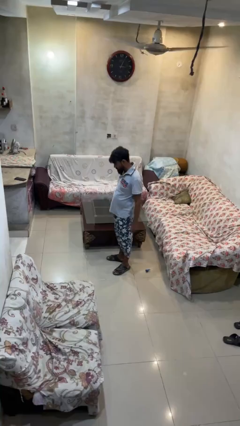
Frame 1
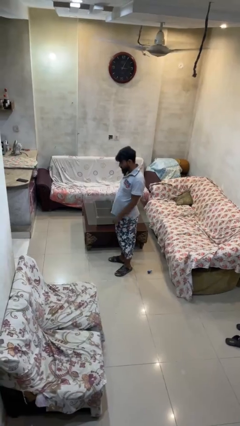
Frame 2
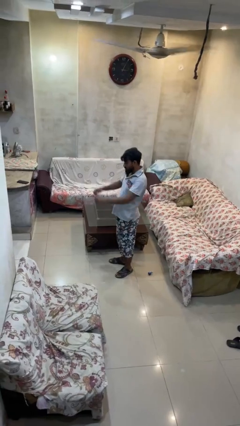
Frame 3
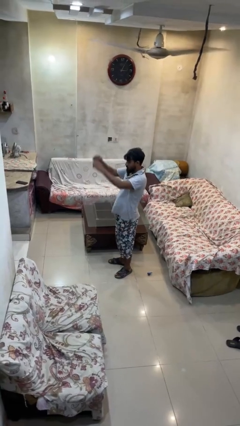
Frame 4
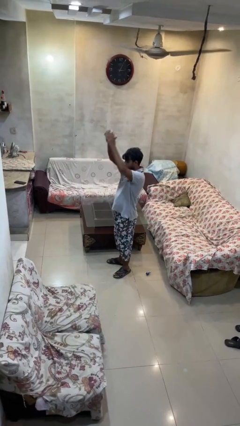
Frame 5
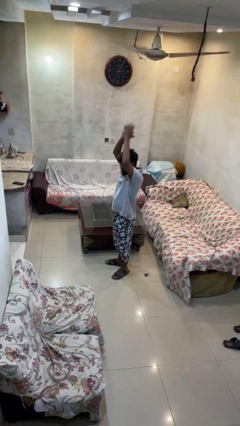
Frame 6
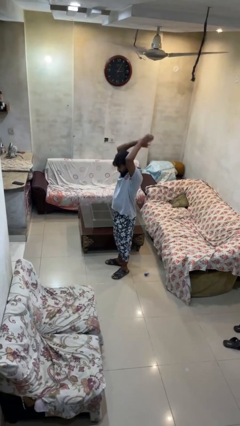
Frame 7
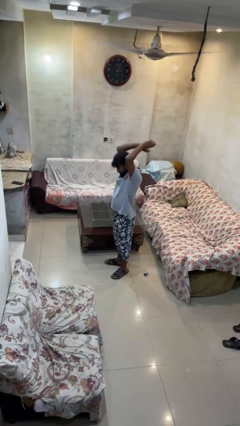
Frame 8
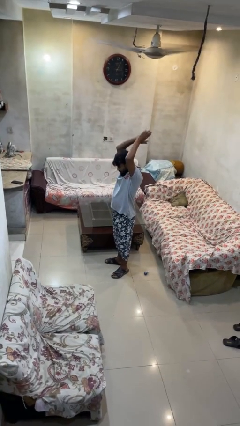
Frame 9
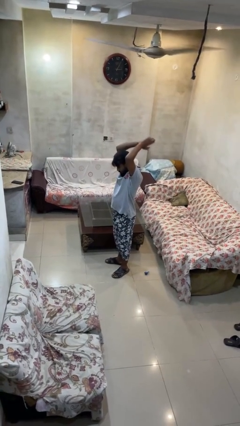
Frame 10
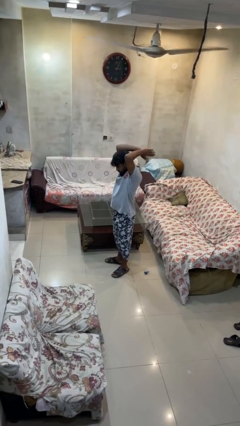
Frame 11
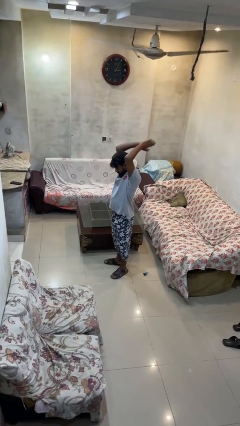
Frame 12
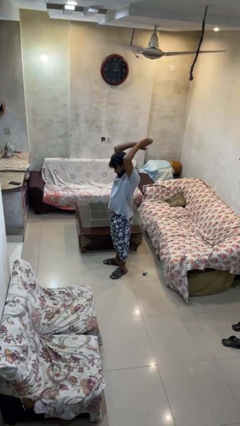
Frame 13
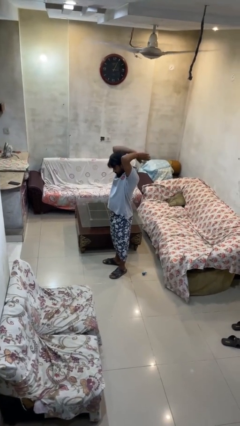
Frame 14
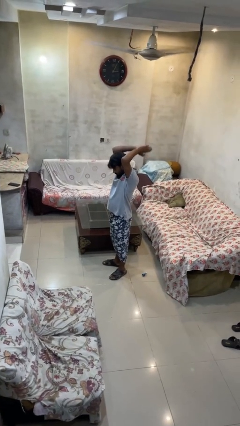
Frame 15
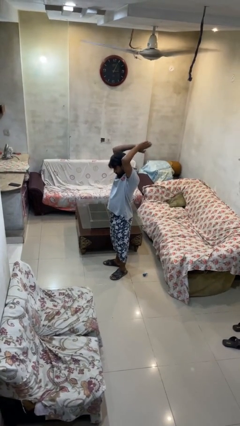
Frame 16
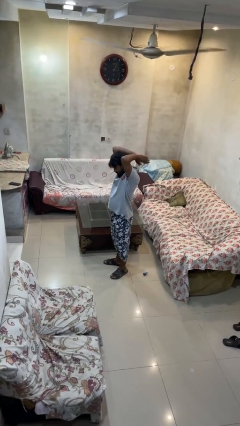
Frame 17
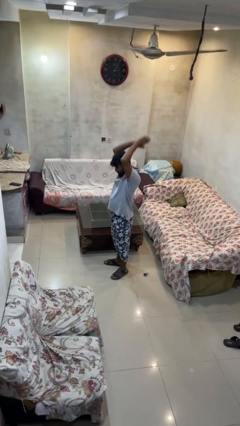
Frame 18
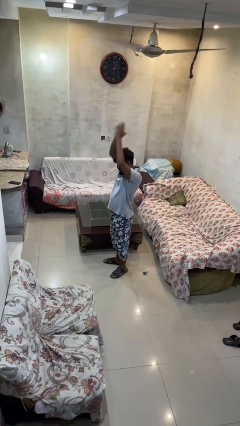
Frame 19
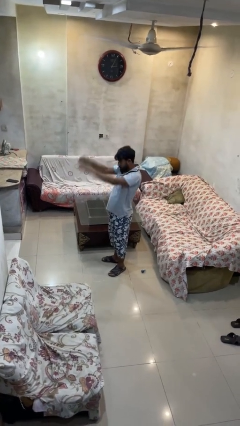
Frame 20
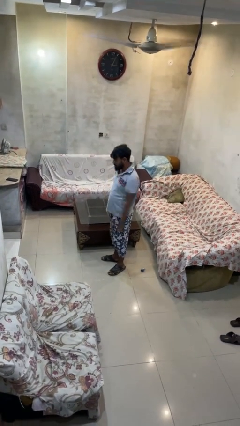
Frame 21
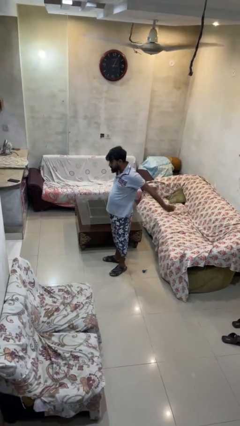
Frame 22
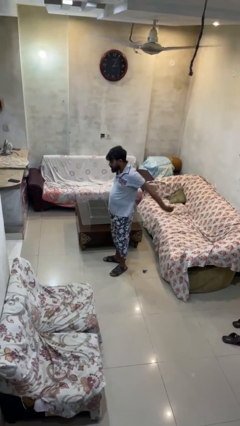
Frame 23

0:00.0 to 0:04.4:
person stretches arms over head

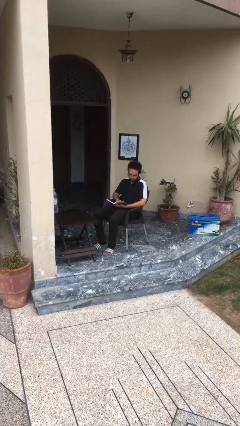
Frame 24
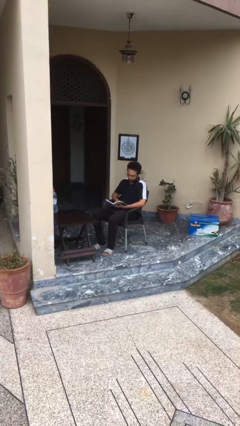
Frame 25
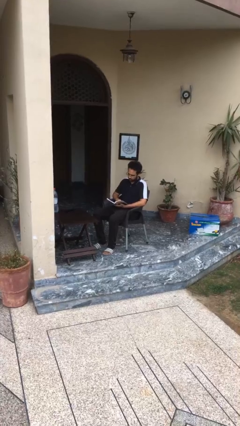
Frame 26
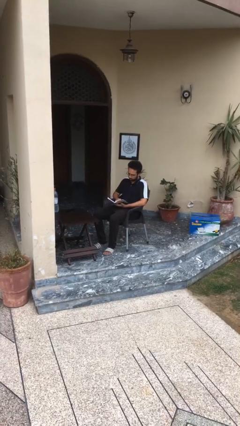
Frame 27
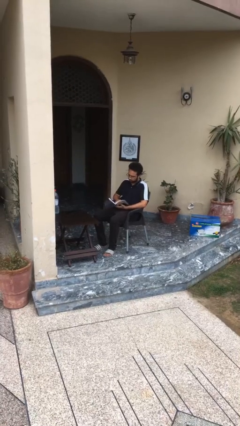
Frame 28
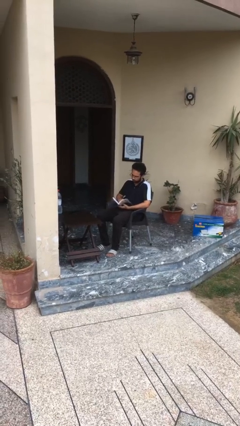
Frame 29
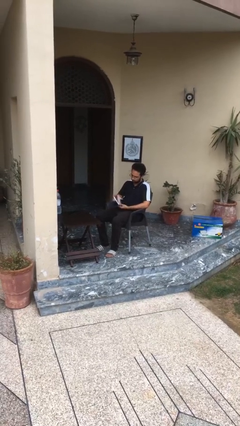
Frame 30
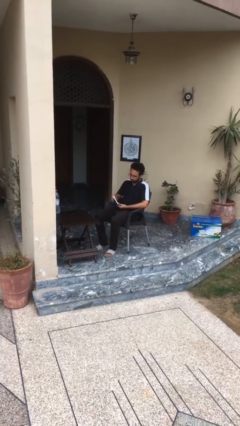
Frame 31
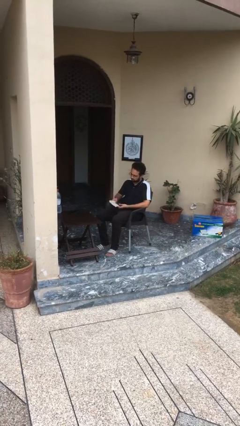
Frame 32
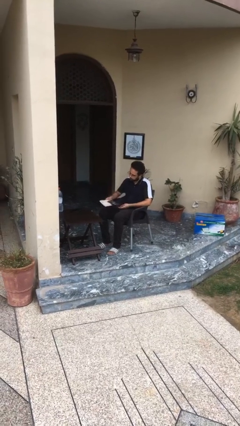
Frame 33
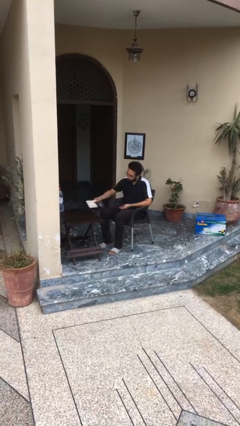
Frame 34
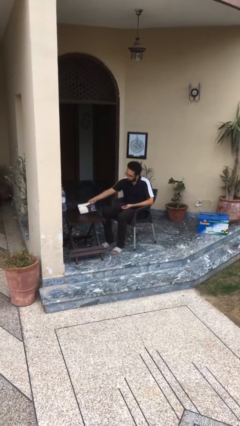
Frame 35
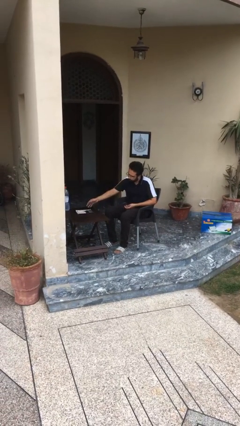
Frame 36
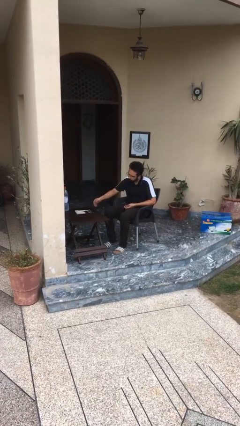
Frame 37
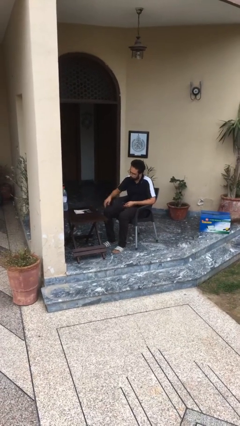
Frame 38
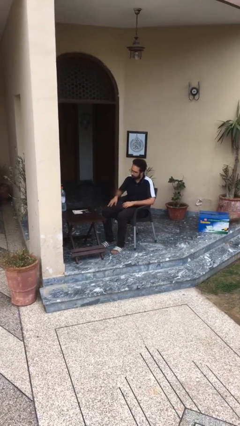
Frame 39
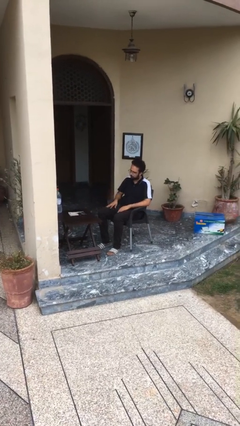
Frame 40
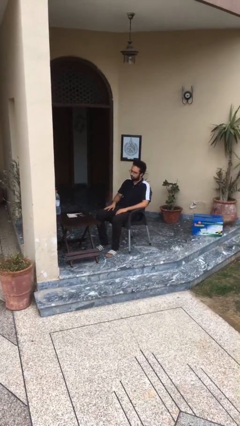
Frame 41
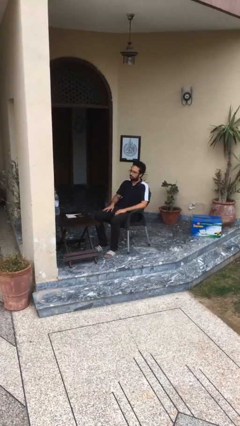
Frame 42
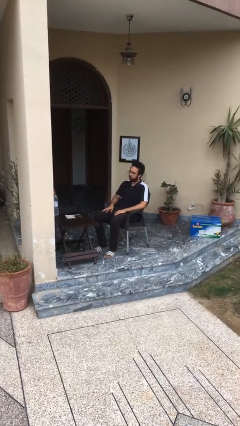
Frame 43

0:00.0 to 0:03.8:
person puts down object on table

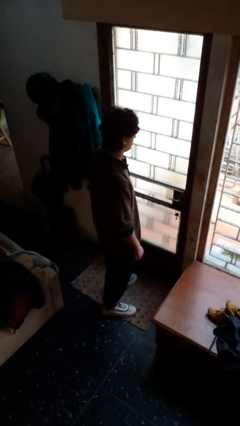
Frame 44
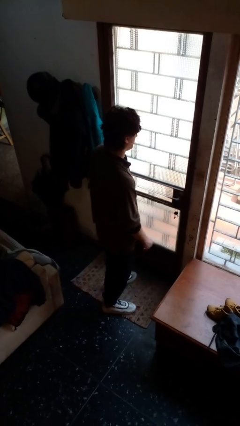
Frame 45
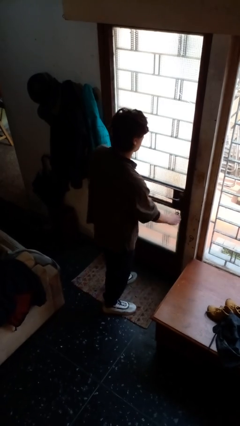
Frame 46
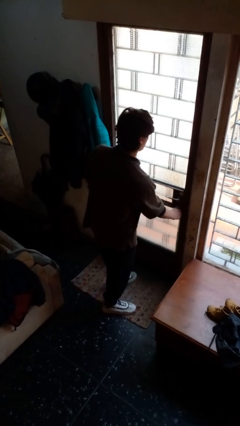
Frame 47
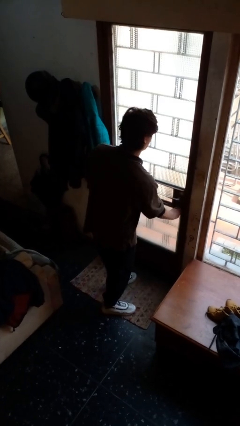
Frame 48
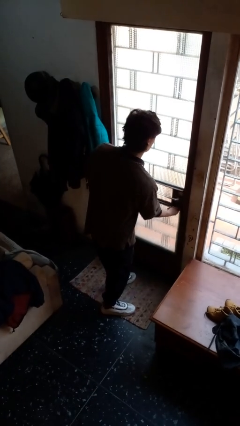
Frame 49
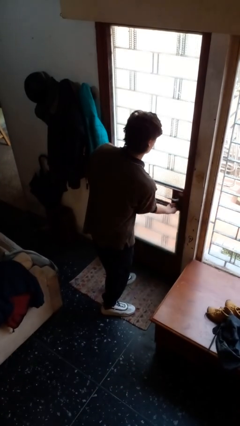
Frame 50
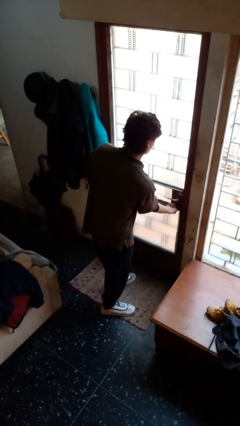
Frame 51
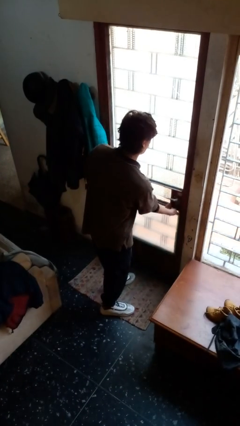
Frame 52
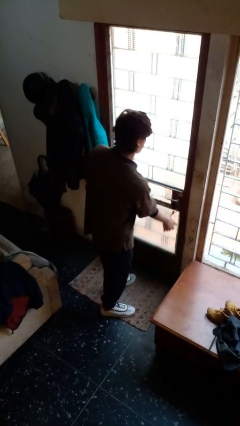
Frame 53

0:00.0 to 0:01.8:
person locks door with keys

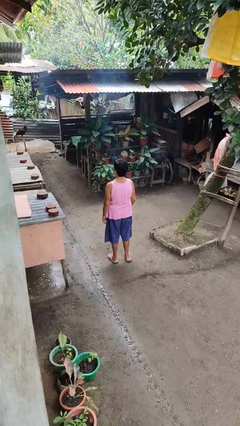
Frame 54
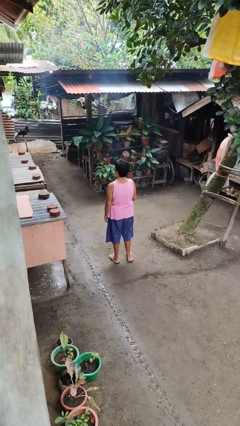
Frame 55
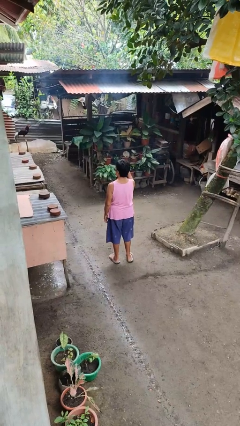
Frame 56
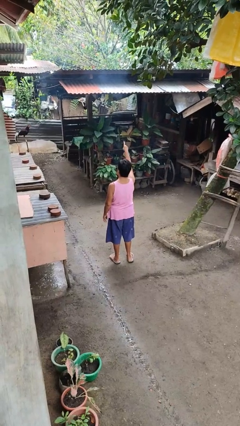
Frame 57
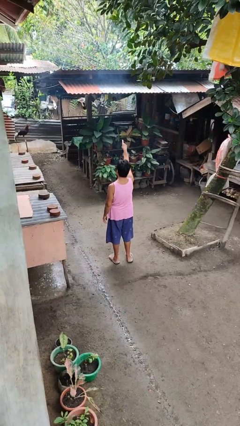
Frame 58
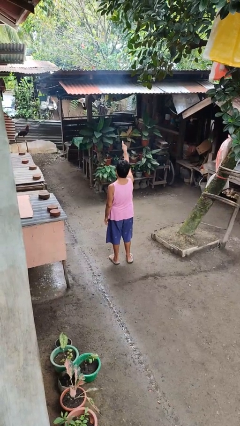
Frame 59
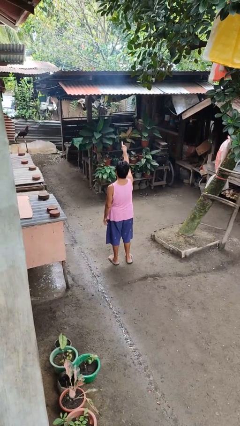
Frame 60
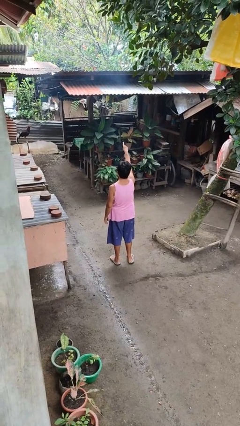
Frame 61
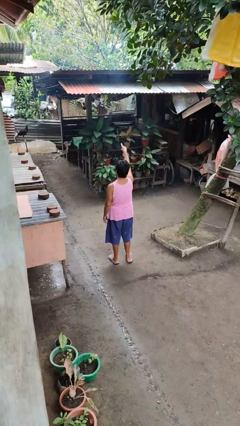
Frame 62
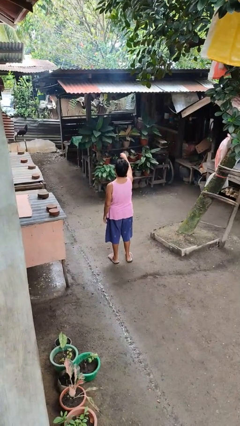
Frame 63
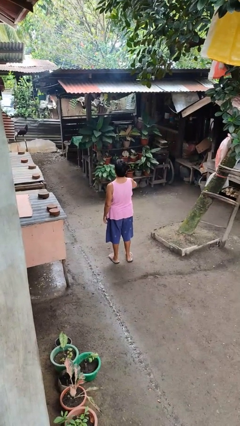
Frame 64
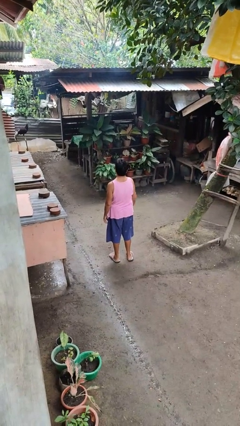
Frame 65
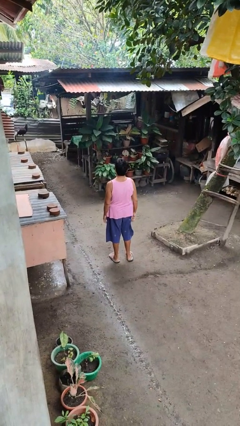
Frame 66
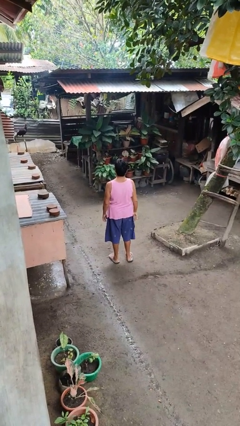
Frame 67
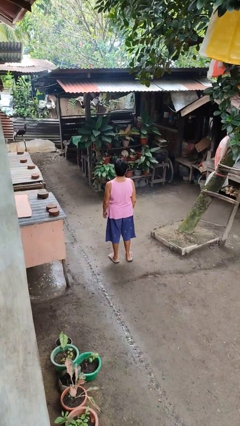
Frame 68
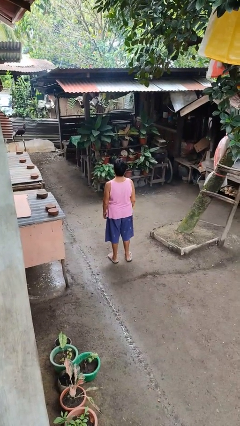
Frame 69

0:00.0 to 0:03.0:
person points at person

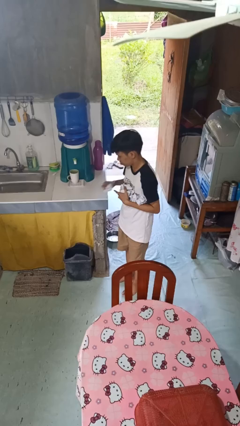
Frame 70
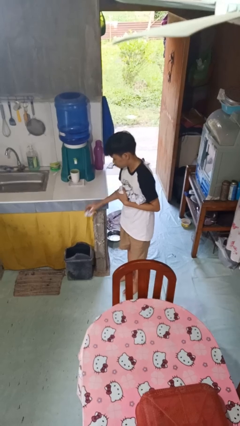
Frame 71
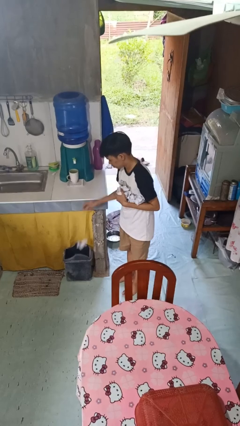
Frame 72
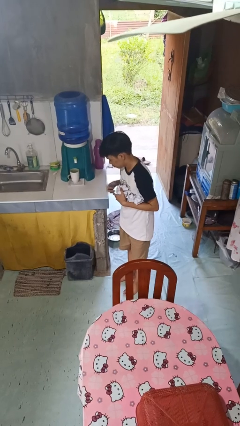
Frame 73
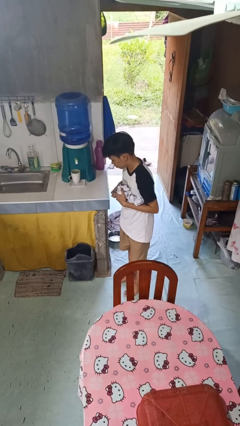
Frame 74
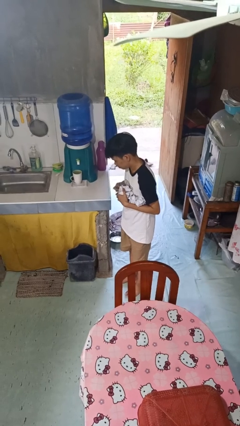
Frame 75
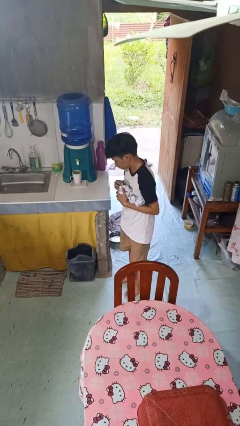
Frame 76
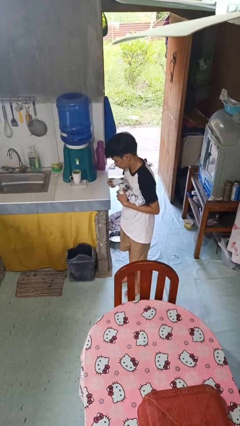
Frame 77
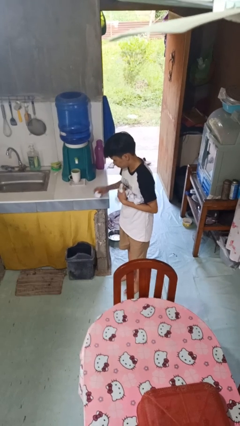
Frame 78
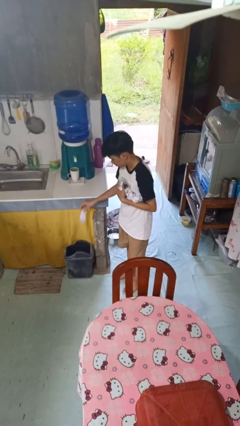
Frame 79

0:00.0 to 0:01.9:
person discards trash

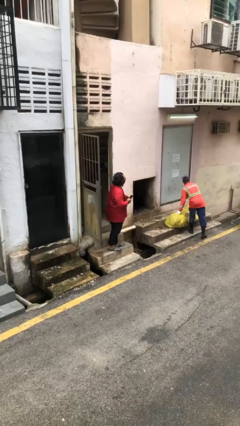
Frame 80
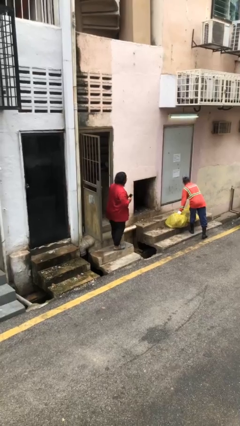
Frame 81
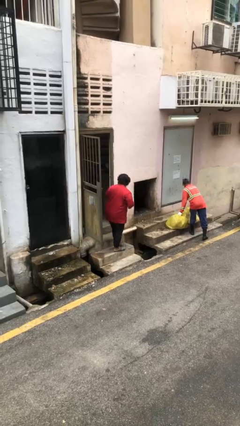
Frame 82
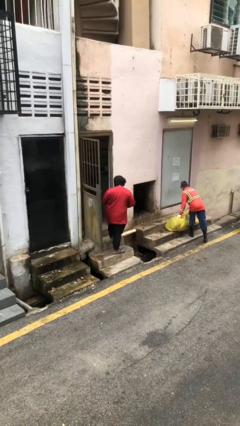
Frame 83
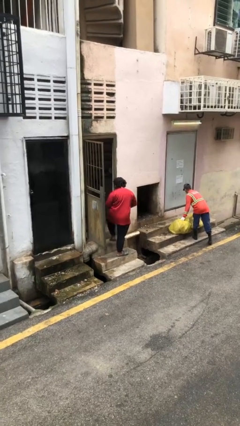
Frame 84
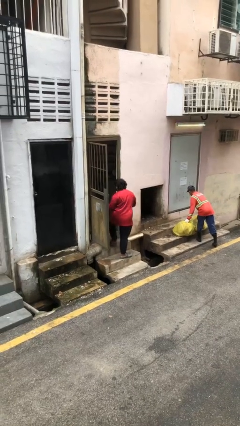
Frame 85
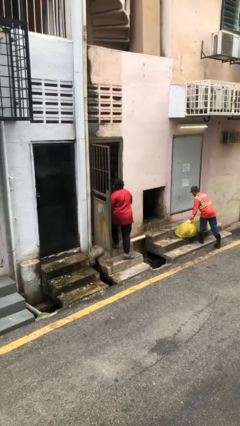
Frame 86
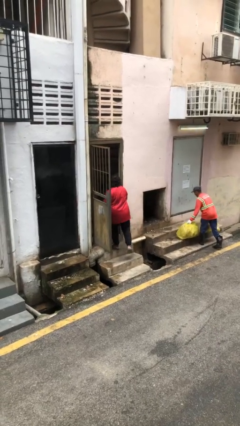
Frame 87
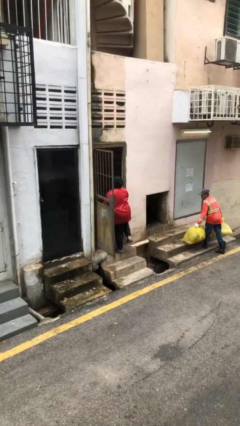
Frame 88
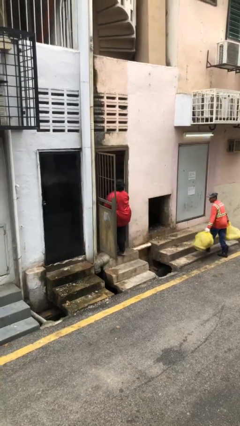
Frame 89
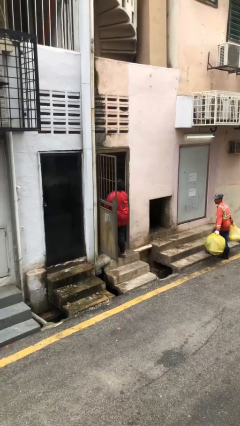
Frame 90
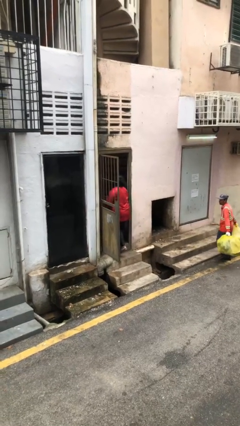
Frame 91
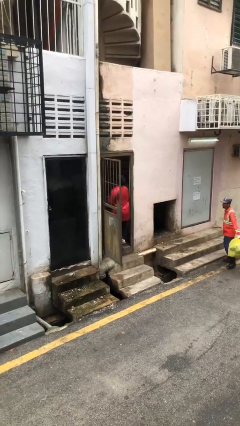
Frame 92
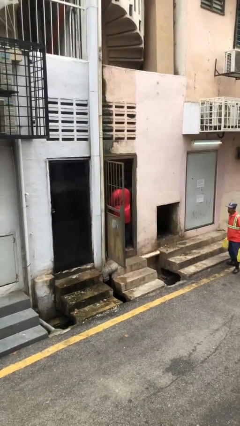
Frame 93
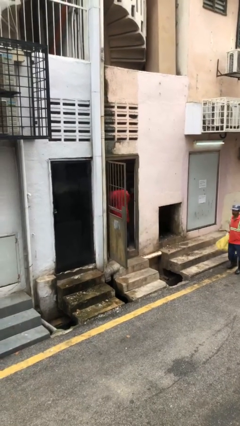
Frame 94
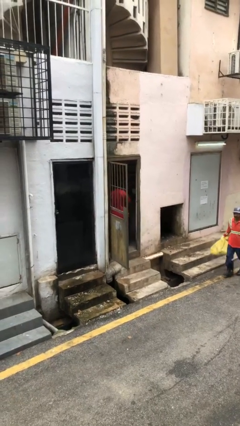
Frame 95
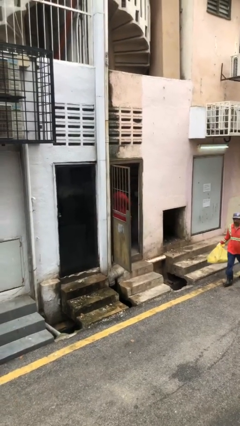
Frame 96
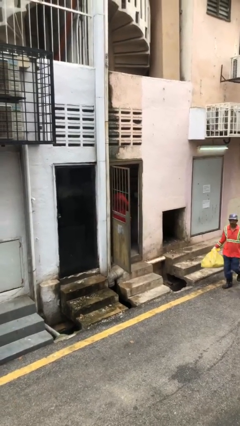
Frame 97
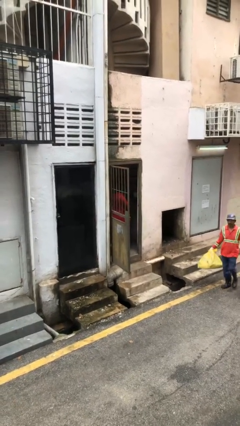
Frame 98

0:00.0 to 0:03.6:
person exits scene through structure
